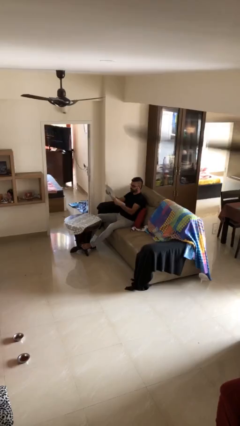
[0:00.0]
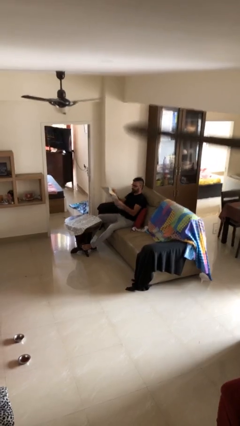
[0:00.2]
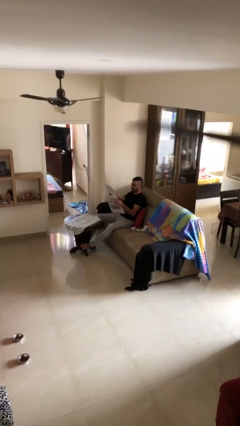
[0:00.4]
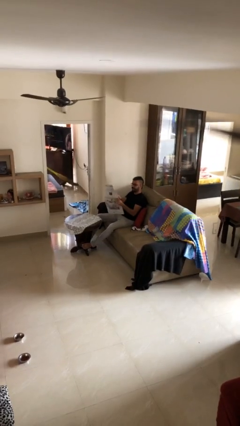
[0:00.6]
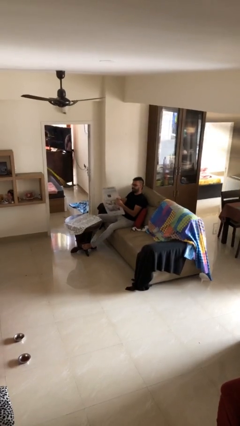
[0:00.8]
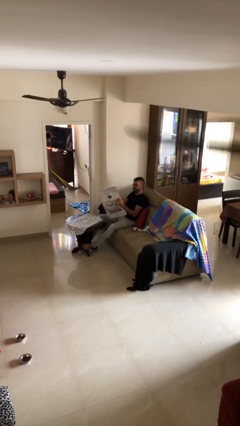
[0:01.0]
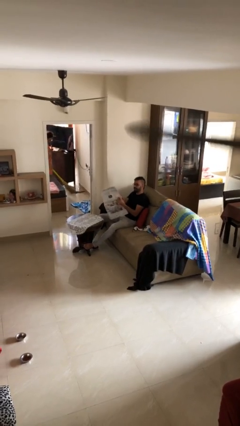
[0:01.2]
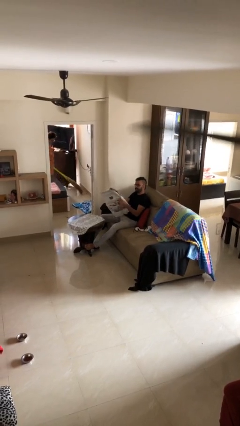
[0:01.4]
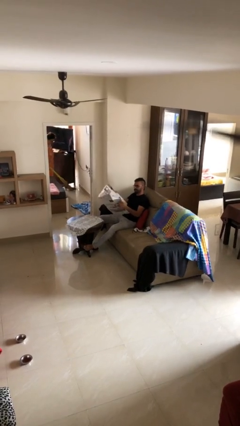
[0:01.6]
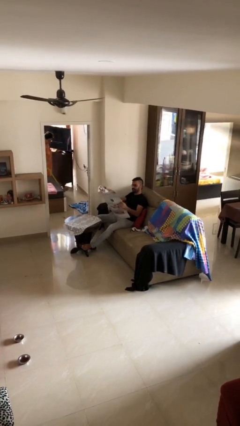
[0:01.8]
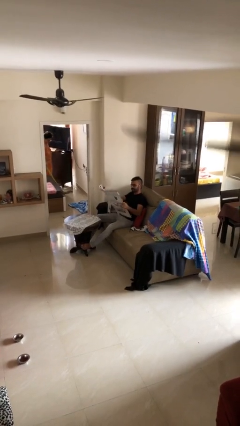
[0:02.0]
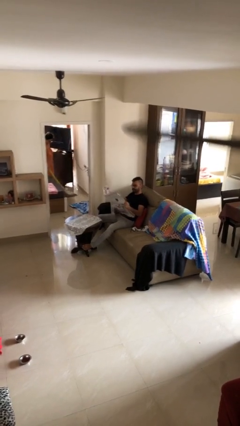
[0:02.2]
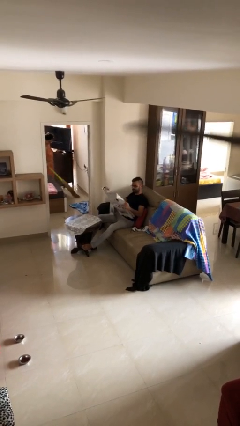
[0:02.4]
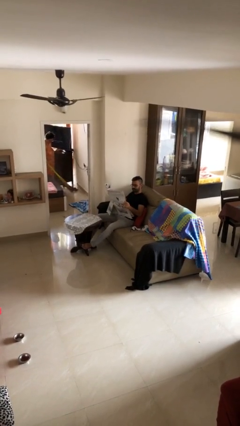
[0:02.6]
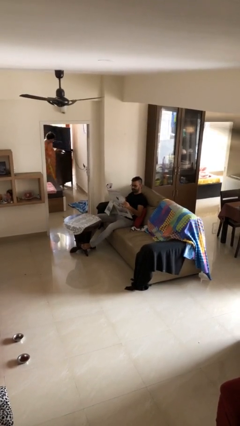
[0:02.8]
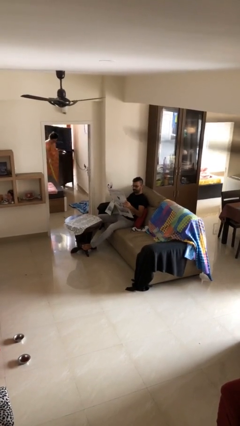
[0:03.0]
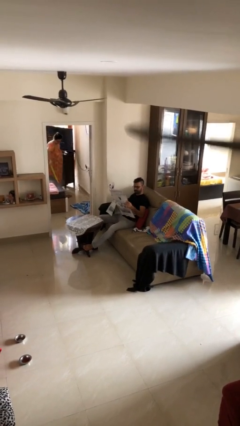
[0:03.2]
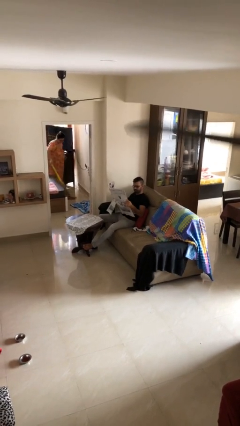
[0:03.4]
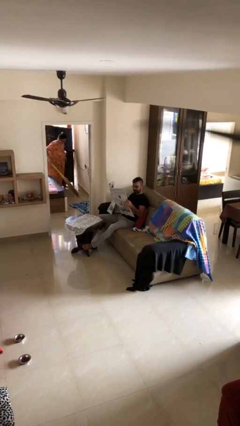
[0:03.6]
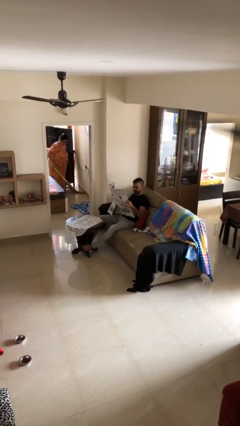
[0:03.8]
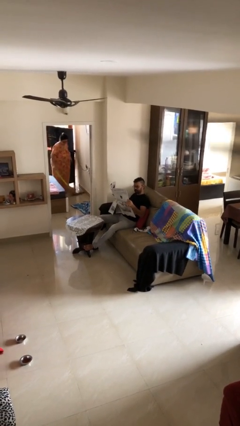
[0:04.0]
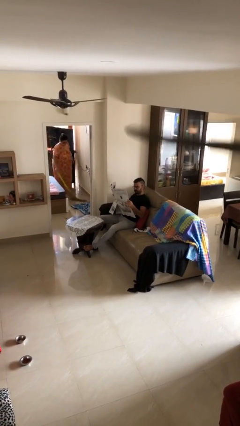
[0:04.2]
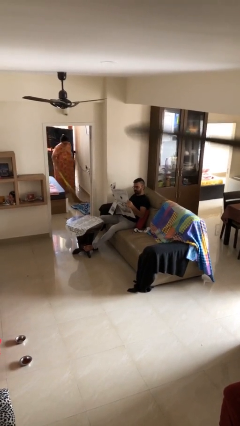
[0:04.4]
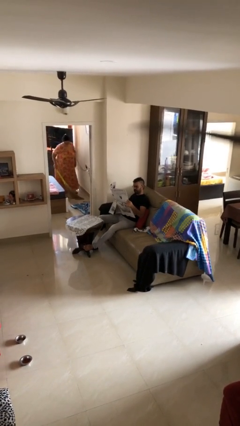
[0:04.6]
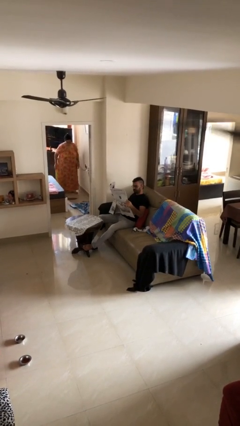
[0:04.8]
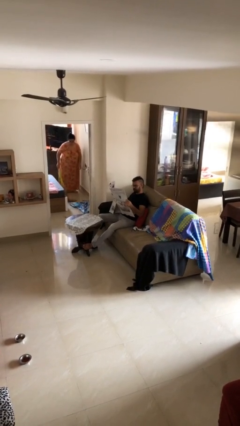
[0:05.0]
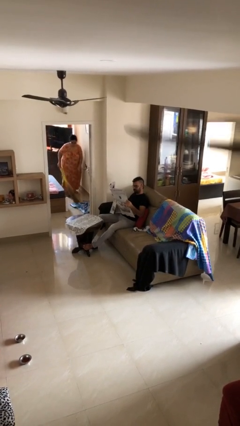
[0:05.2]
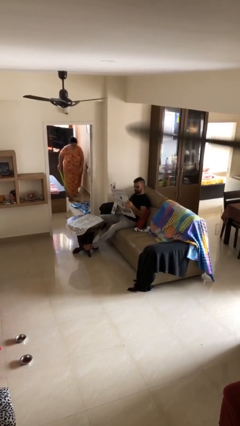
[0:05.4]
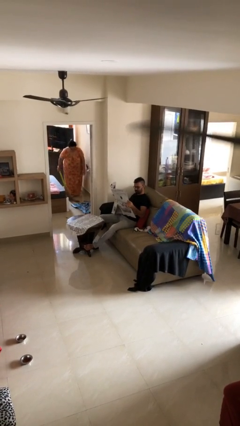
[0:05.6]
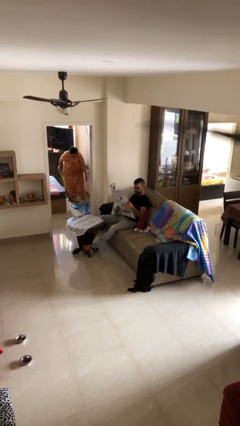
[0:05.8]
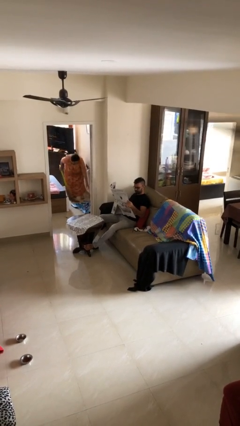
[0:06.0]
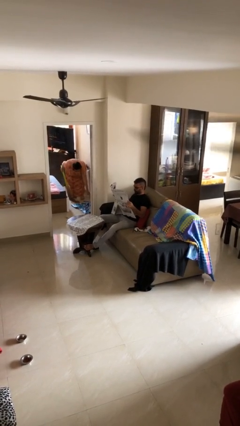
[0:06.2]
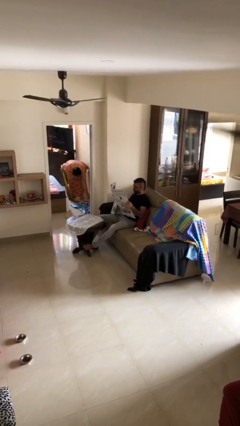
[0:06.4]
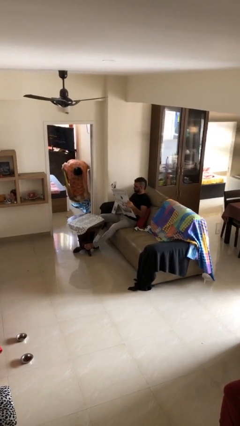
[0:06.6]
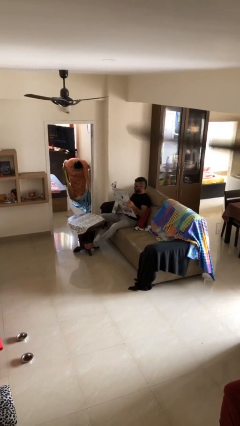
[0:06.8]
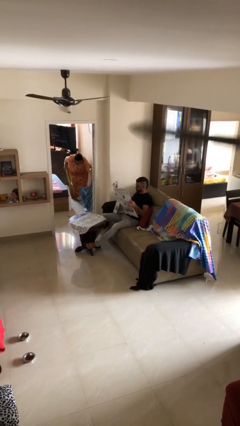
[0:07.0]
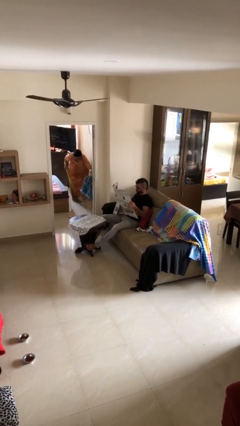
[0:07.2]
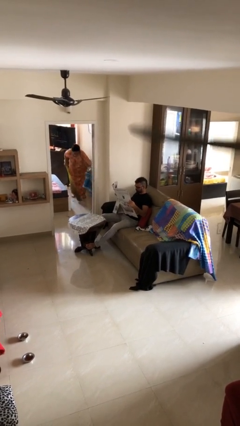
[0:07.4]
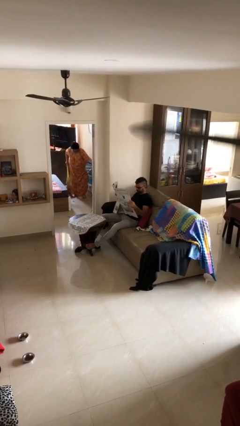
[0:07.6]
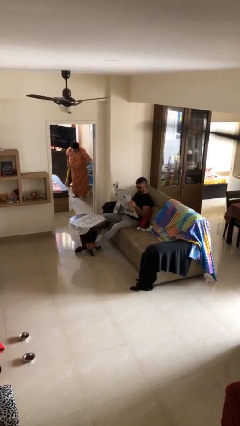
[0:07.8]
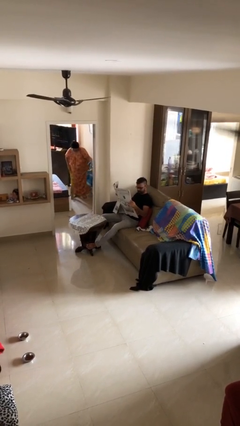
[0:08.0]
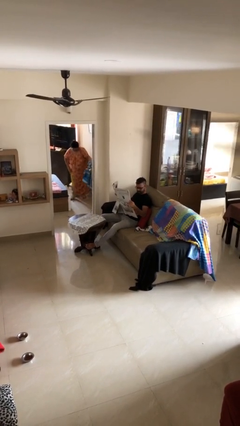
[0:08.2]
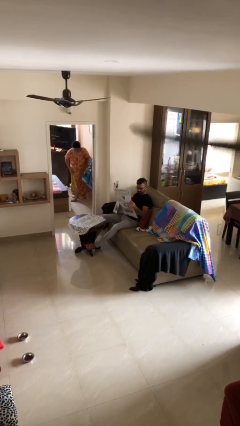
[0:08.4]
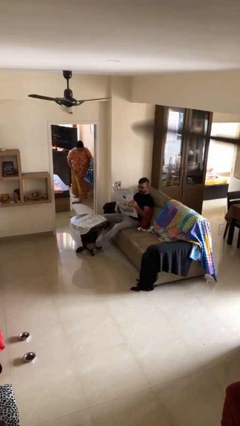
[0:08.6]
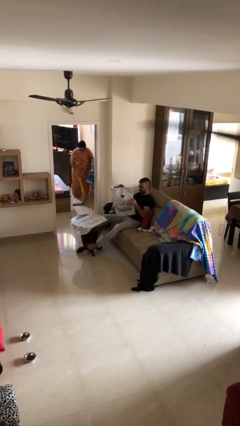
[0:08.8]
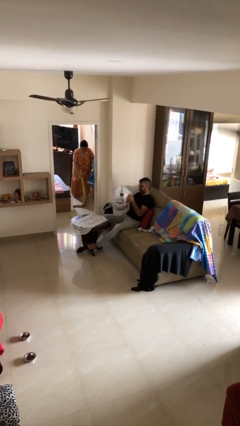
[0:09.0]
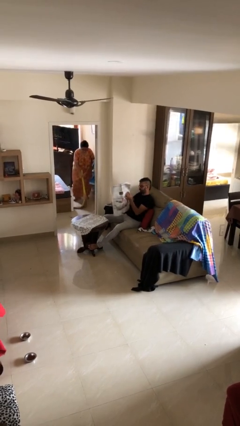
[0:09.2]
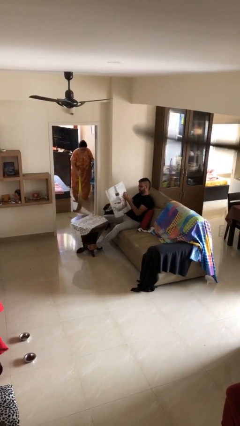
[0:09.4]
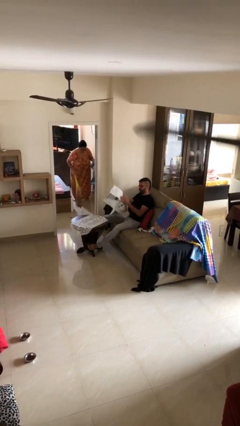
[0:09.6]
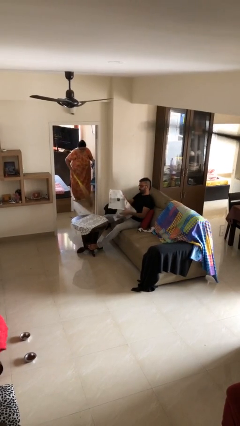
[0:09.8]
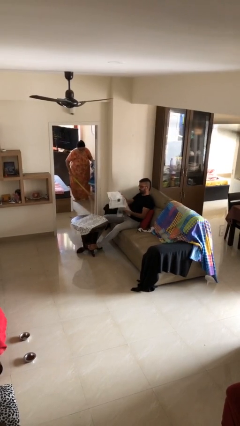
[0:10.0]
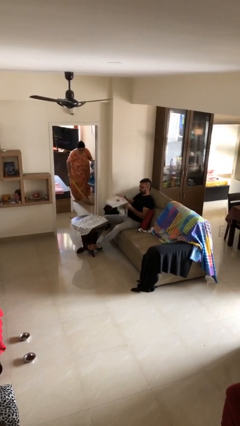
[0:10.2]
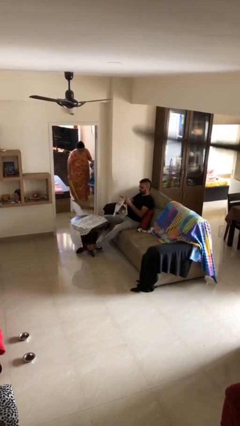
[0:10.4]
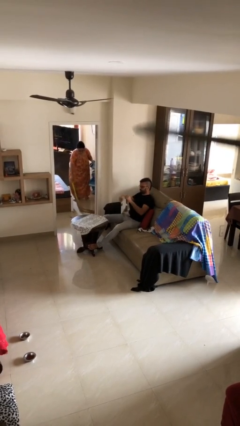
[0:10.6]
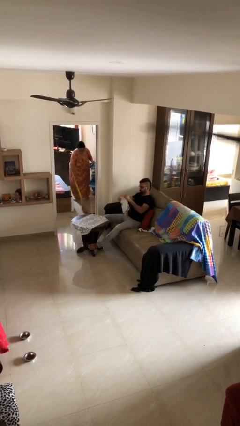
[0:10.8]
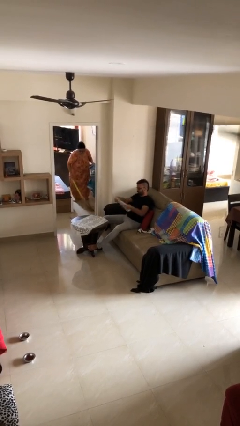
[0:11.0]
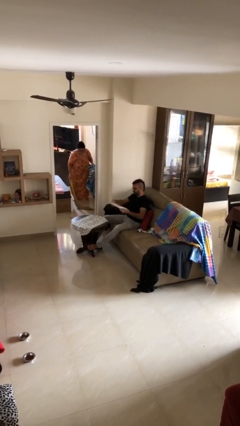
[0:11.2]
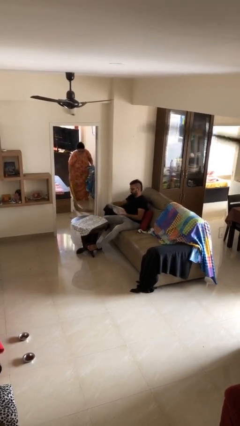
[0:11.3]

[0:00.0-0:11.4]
person reads document

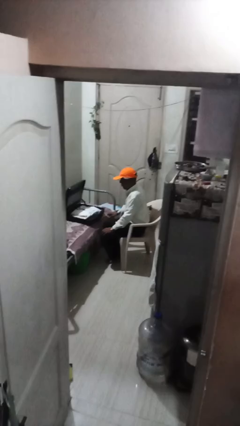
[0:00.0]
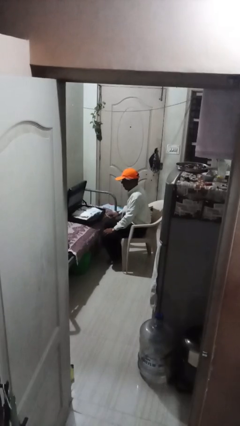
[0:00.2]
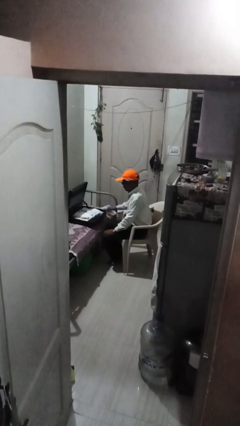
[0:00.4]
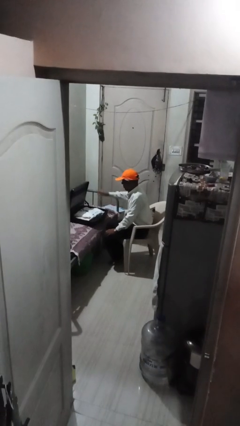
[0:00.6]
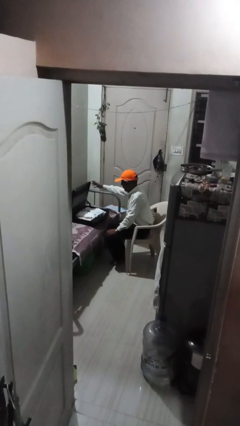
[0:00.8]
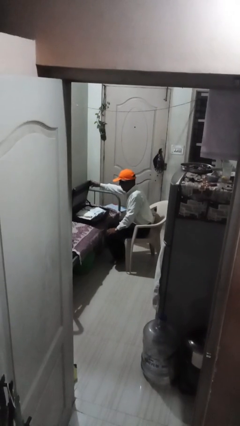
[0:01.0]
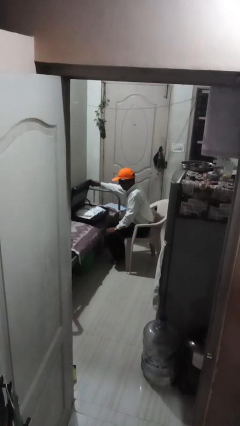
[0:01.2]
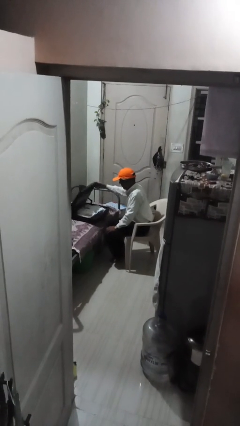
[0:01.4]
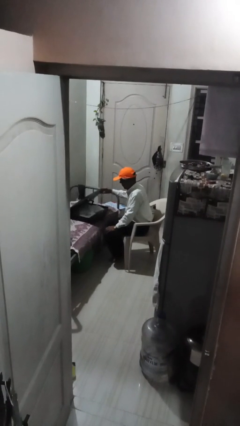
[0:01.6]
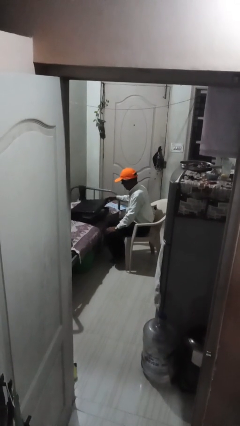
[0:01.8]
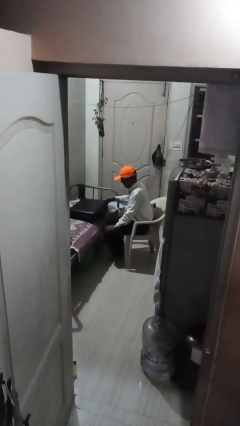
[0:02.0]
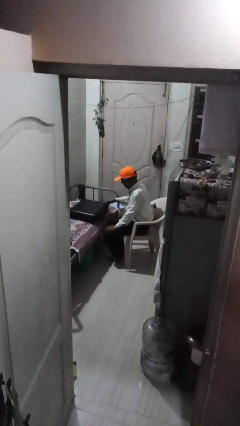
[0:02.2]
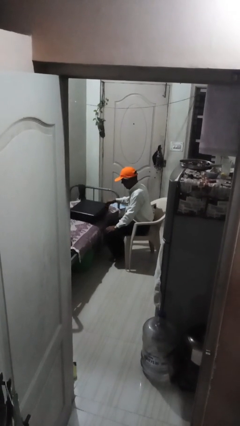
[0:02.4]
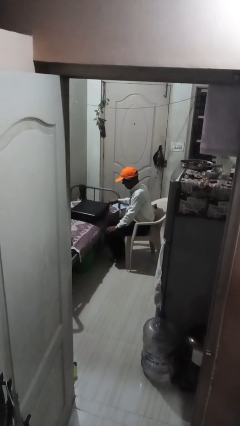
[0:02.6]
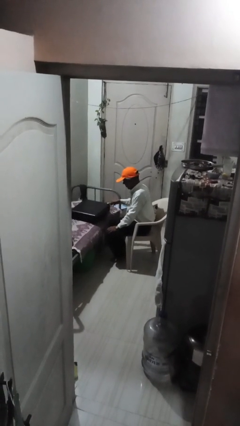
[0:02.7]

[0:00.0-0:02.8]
person closes suitcase

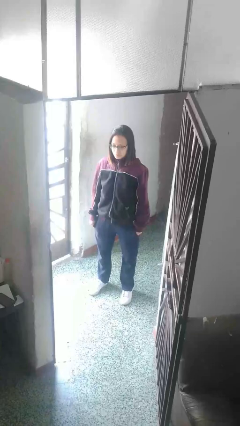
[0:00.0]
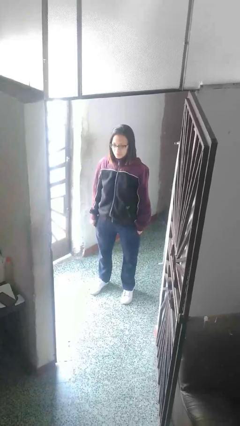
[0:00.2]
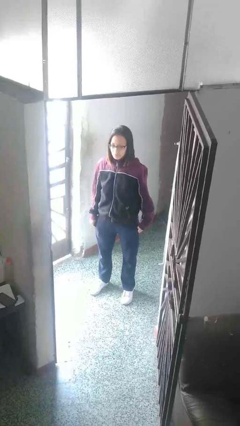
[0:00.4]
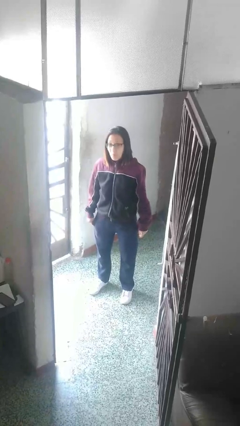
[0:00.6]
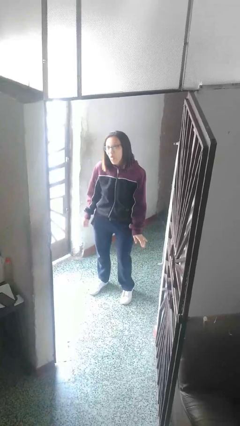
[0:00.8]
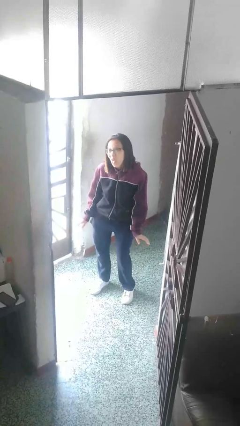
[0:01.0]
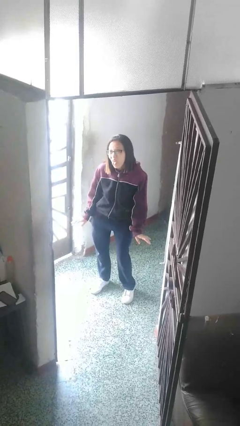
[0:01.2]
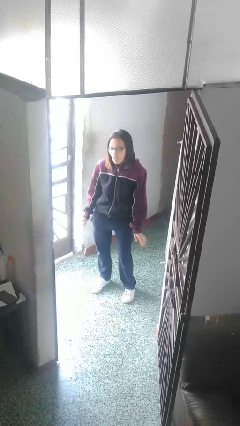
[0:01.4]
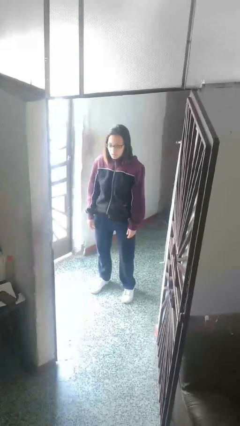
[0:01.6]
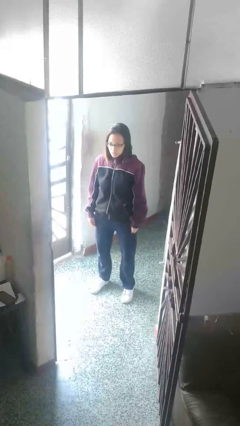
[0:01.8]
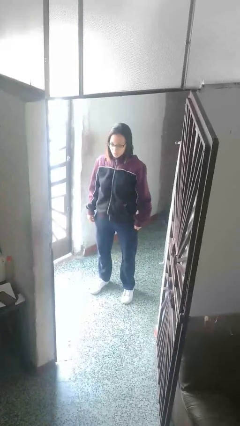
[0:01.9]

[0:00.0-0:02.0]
person sticks out tongue

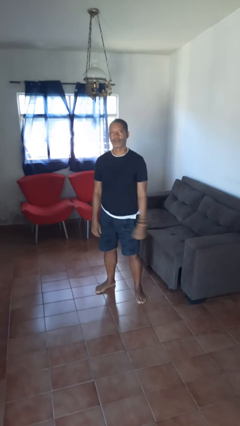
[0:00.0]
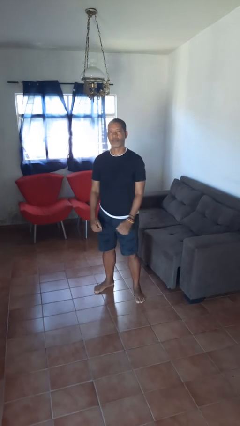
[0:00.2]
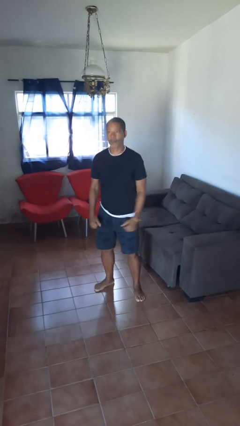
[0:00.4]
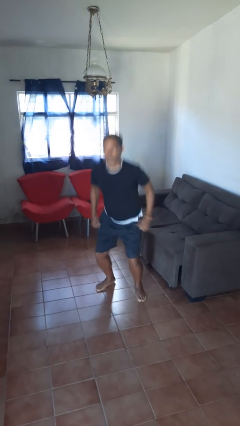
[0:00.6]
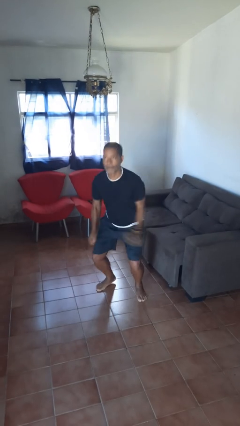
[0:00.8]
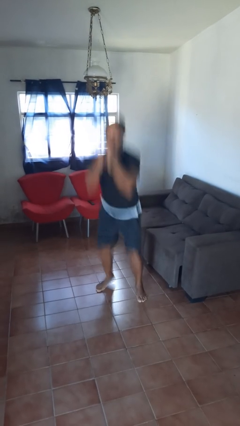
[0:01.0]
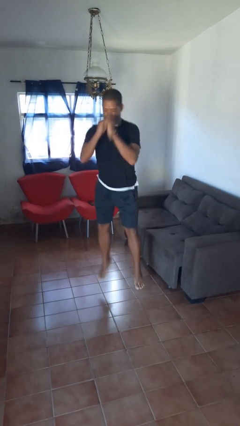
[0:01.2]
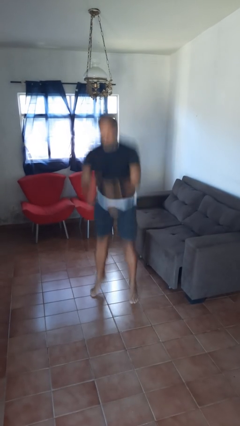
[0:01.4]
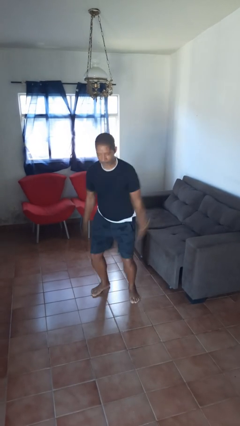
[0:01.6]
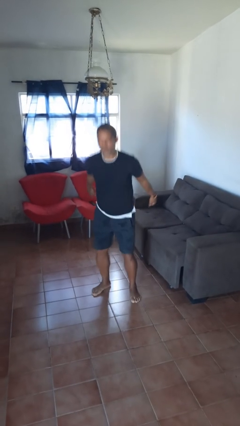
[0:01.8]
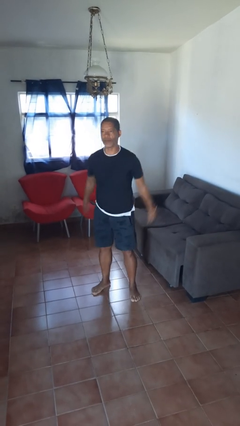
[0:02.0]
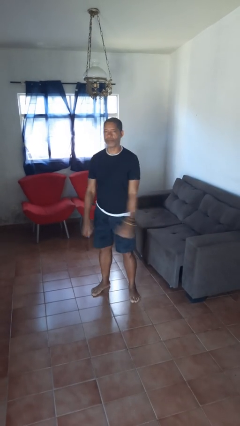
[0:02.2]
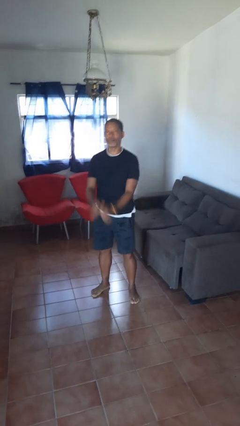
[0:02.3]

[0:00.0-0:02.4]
person jumps
